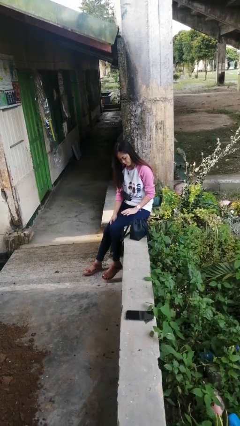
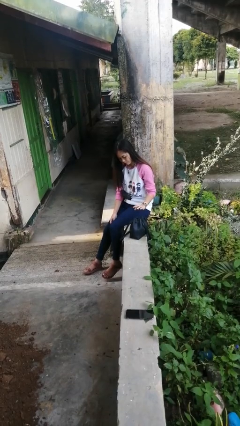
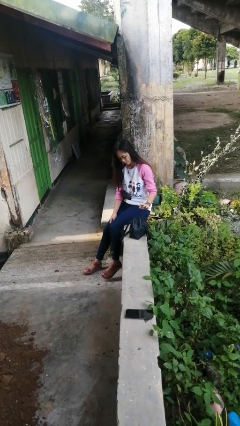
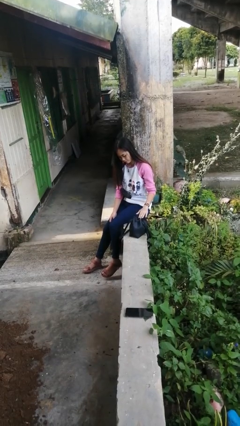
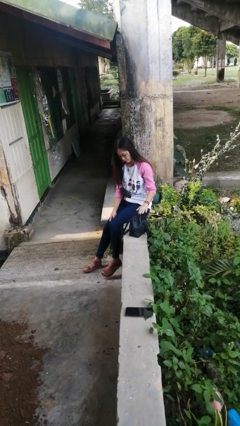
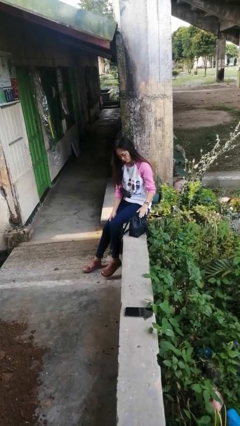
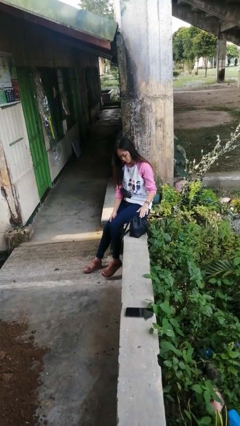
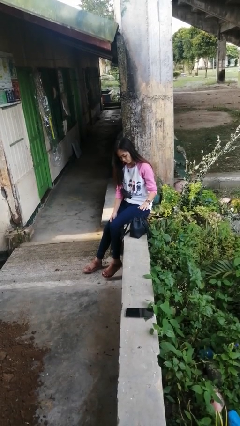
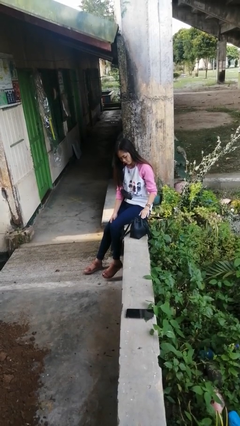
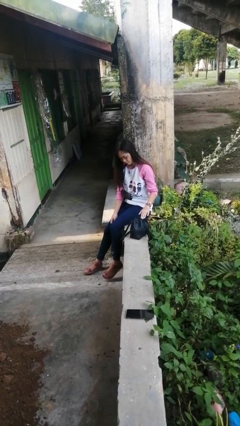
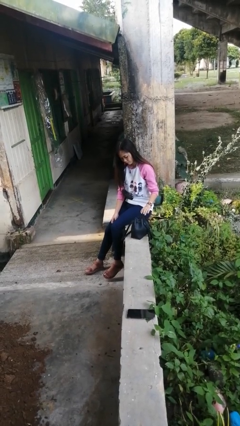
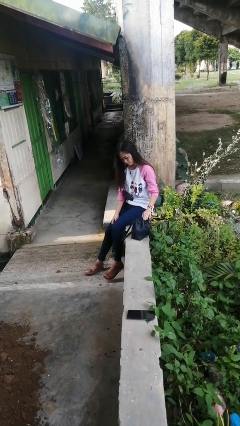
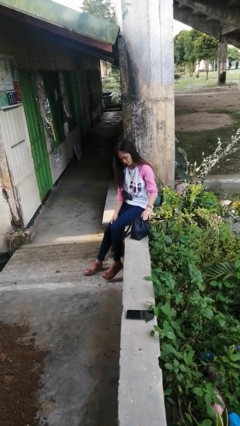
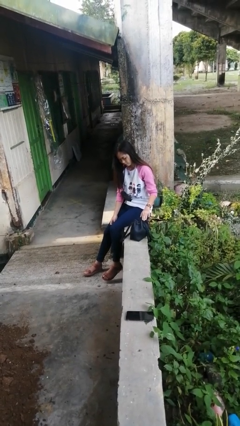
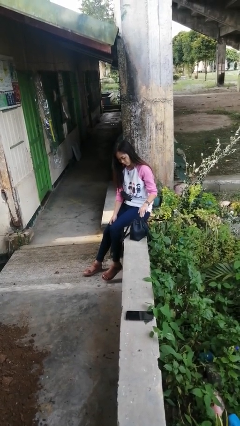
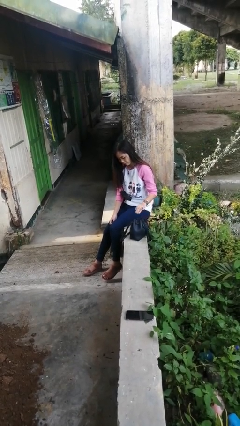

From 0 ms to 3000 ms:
person taps object with finger

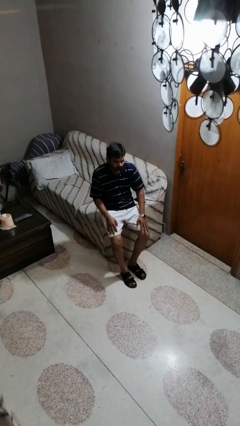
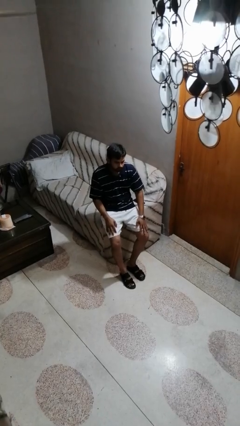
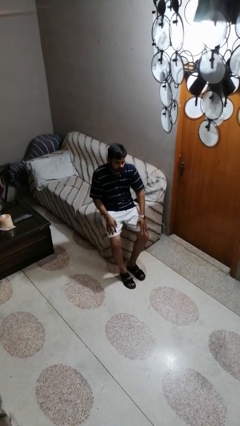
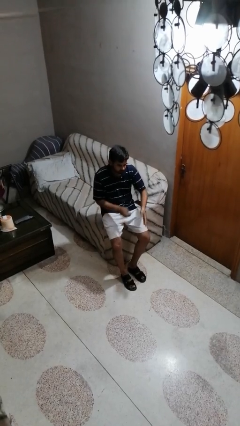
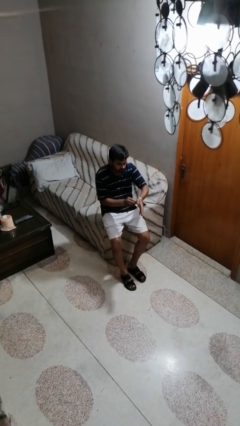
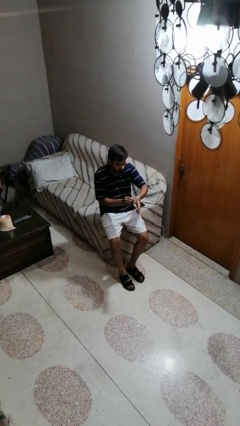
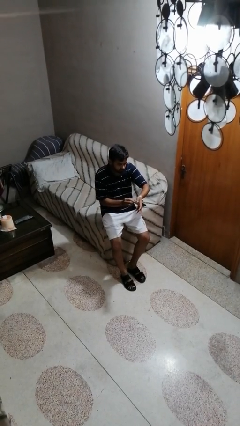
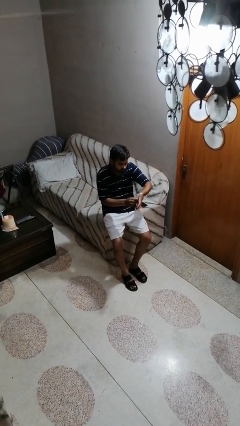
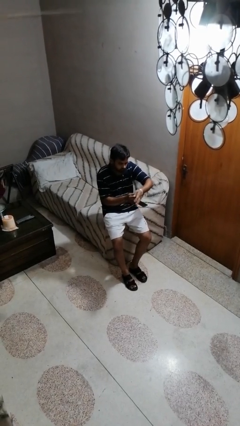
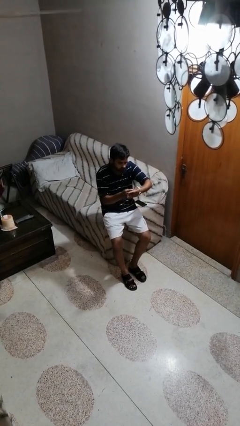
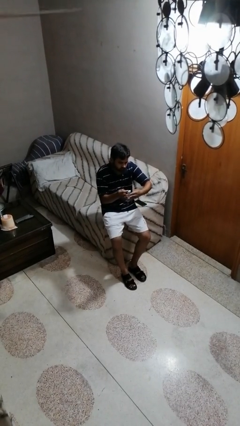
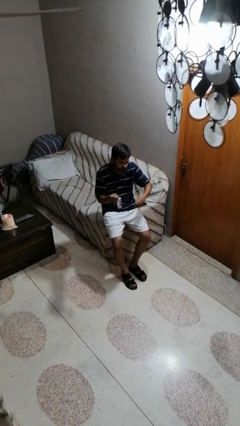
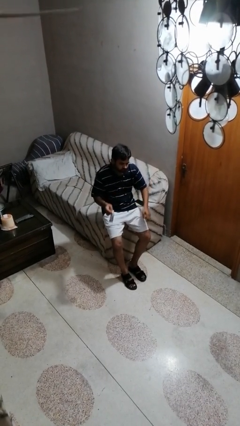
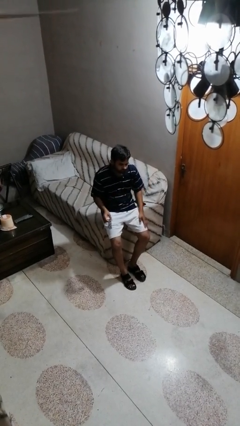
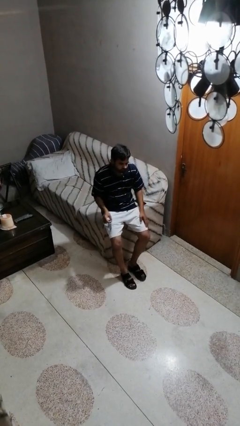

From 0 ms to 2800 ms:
person takes off wristwatch

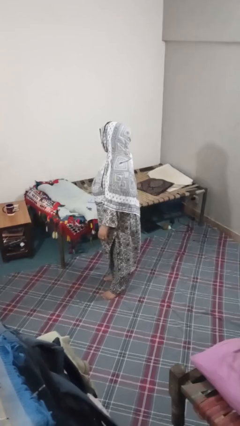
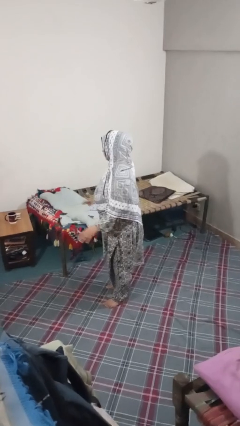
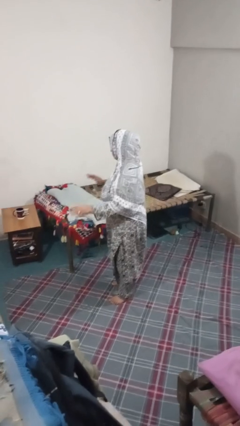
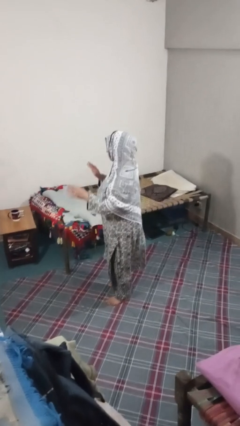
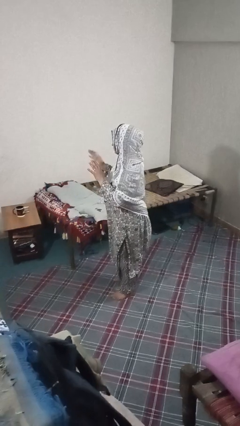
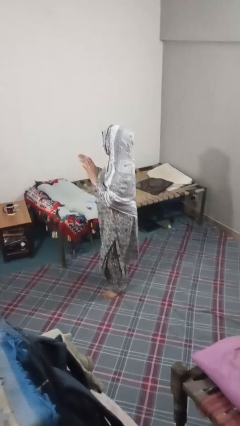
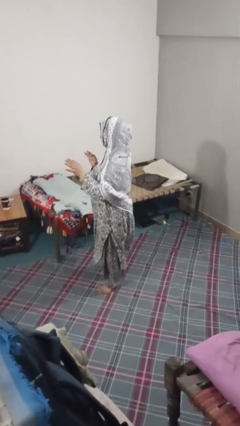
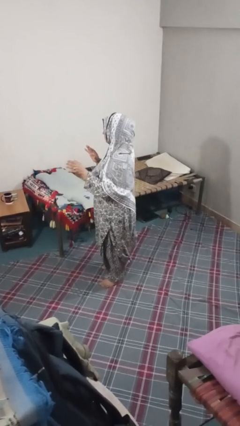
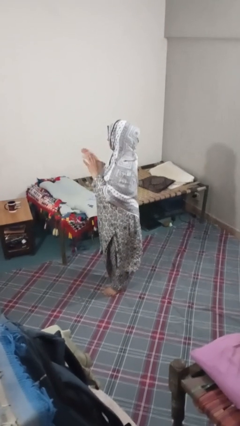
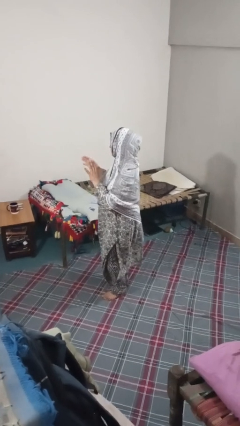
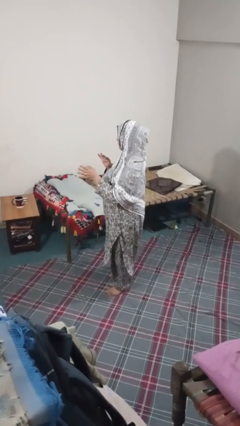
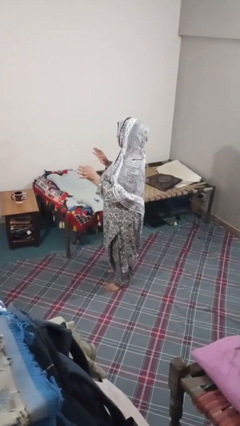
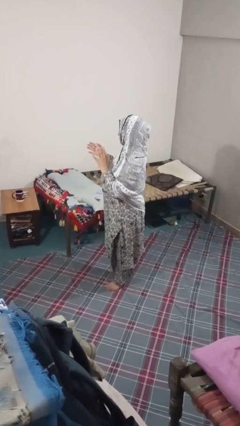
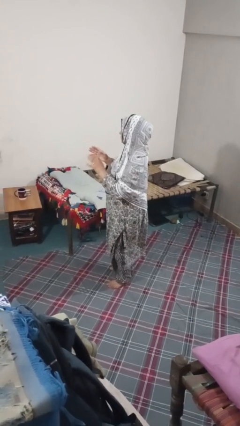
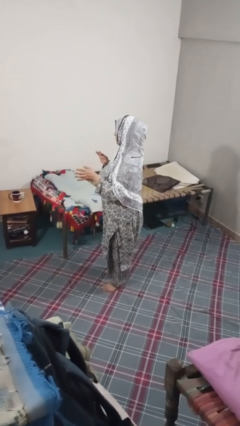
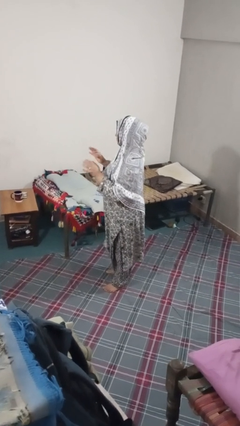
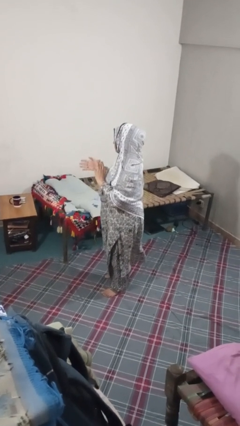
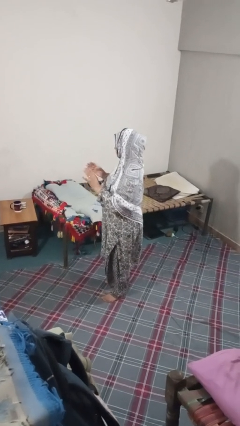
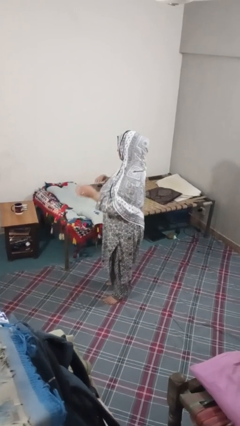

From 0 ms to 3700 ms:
person dances in place

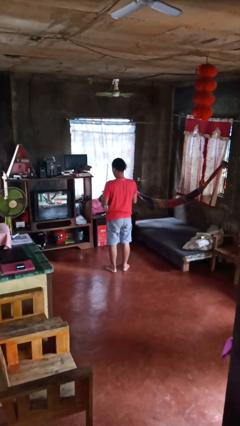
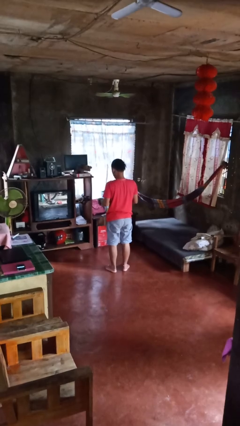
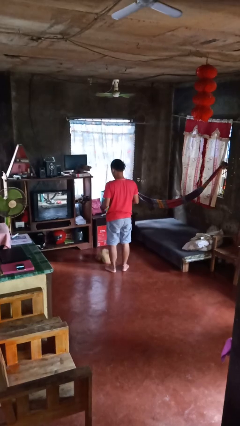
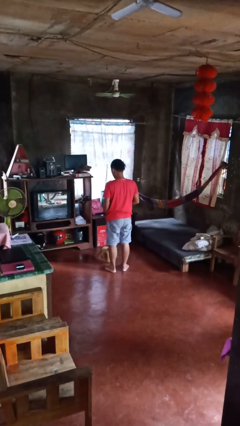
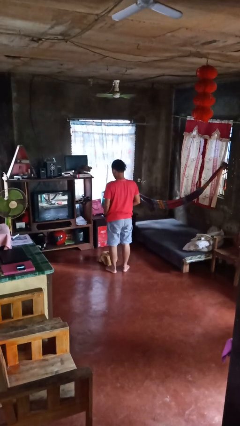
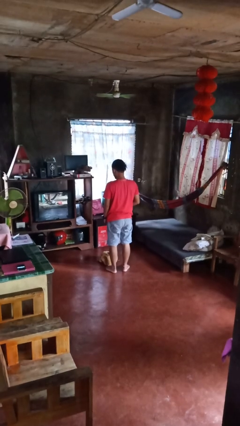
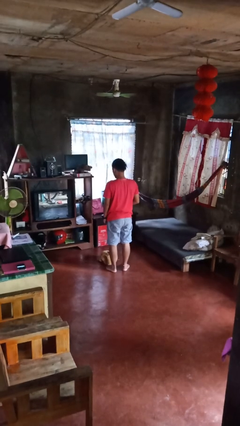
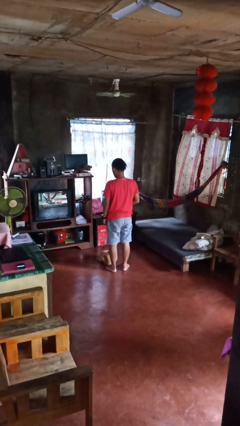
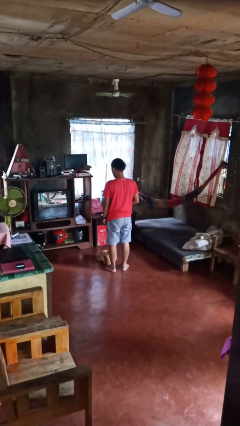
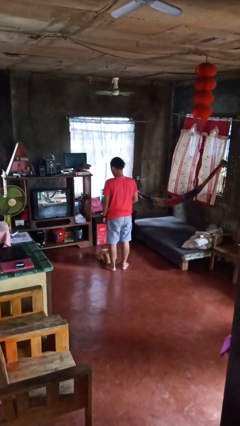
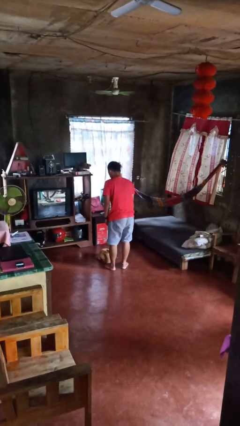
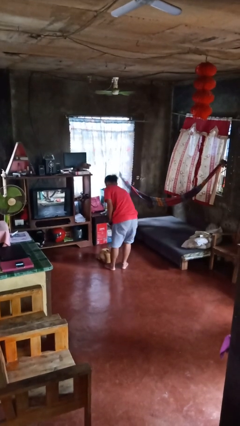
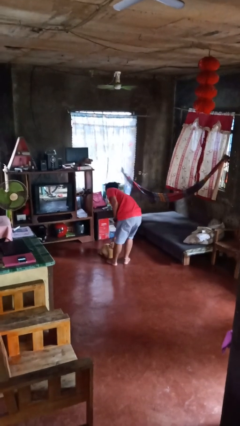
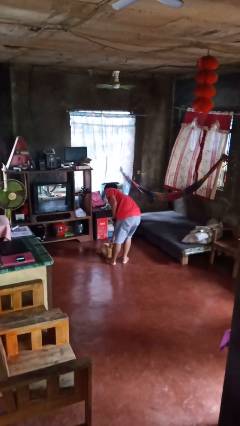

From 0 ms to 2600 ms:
person drops object

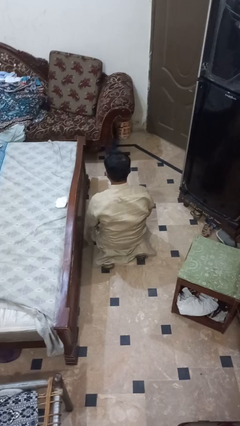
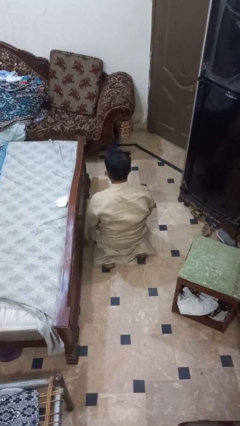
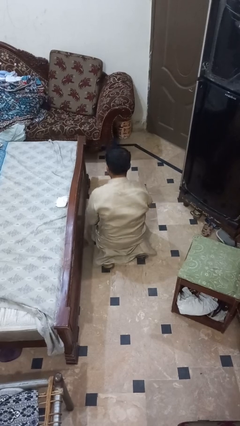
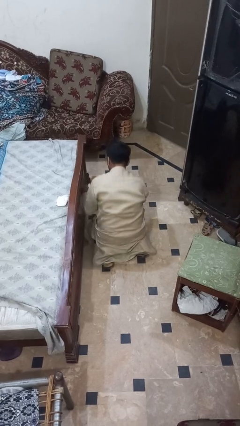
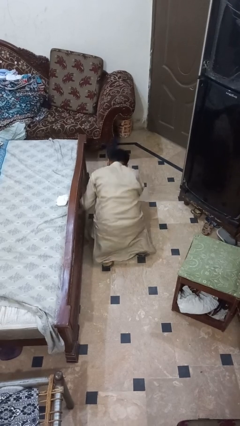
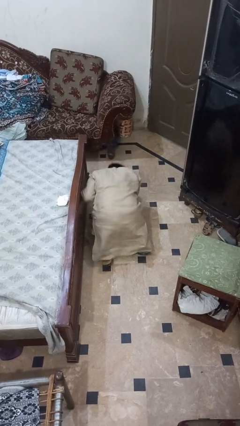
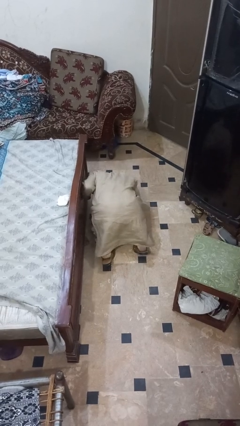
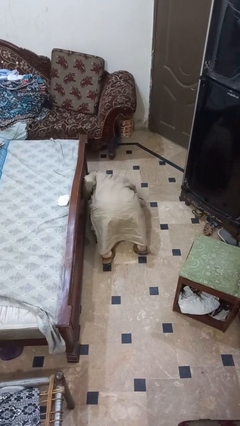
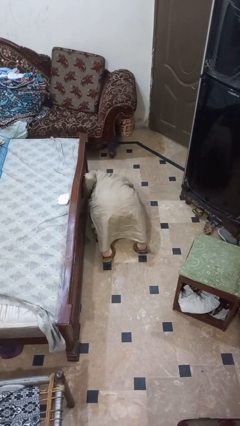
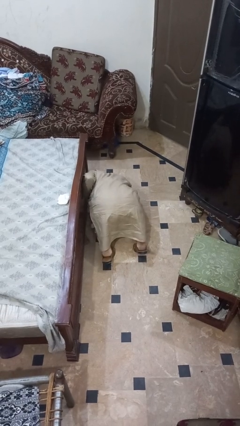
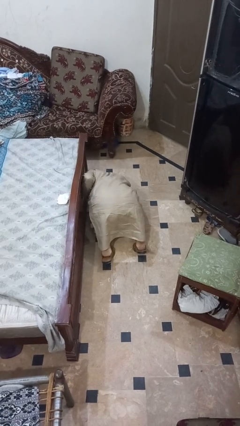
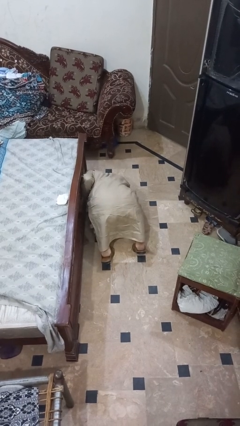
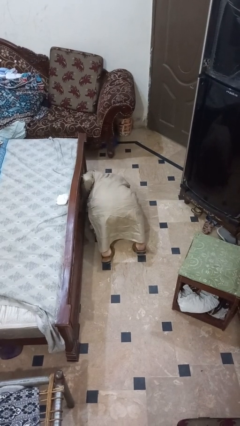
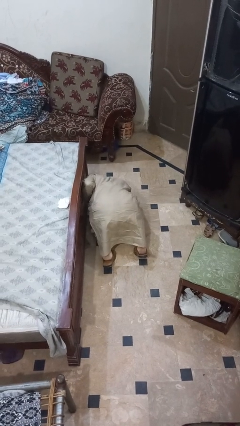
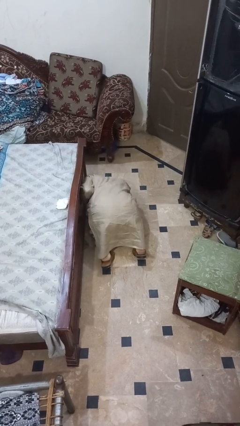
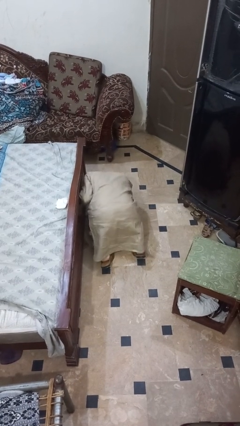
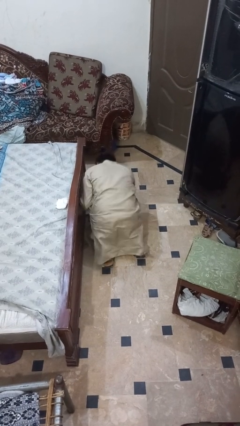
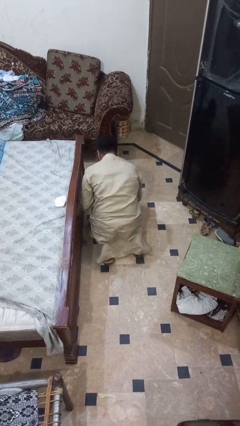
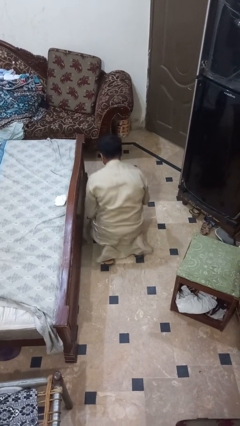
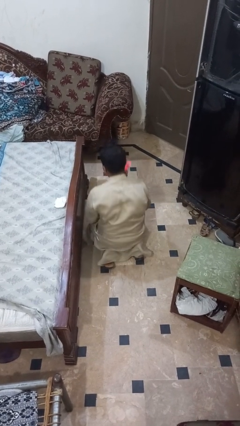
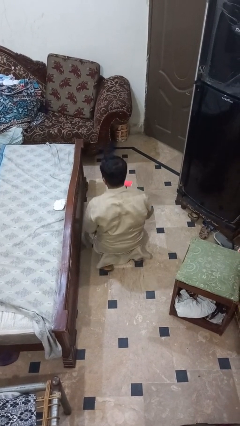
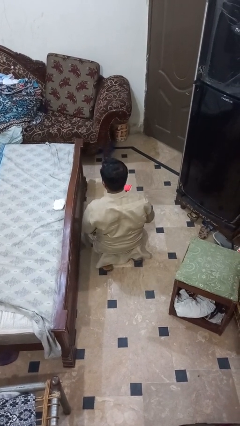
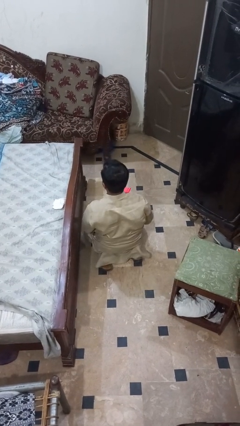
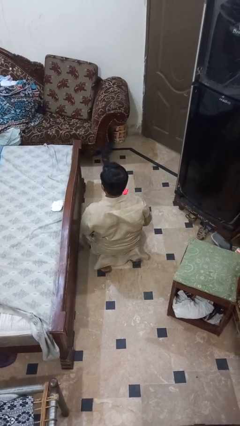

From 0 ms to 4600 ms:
person searches under bed

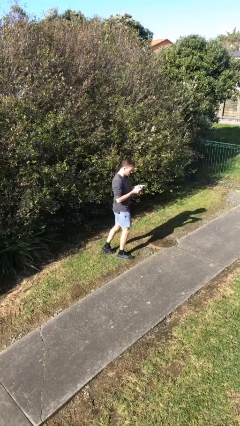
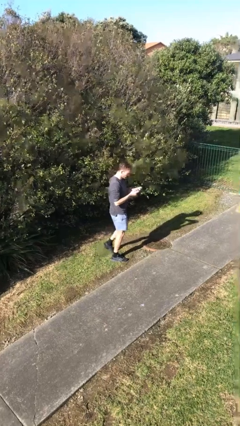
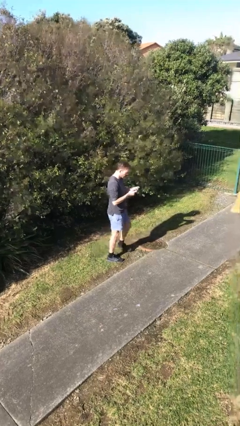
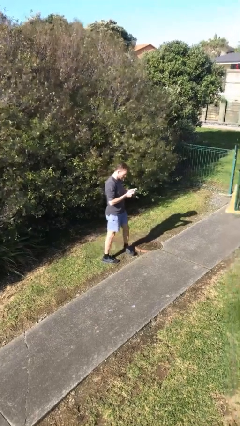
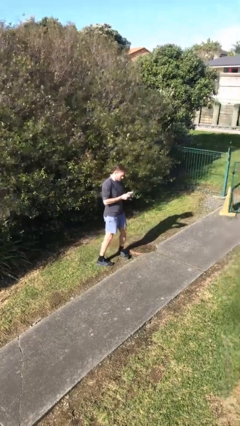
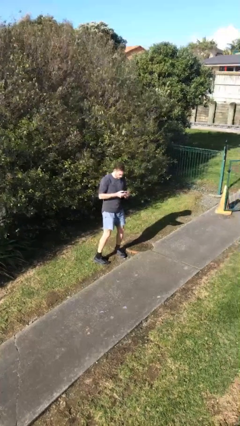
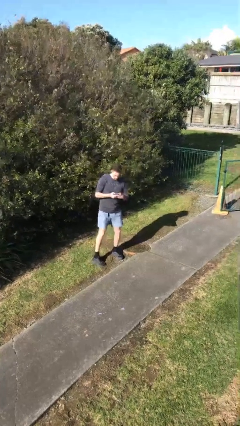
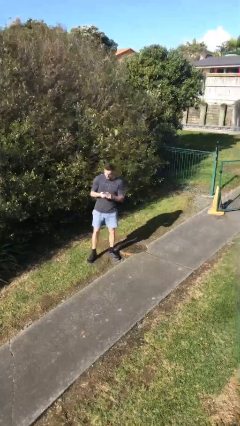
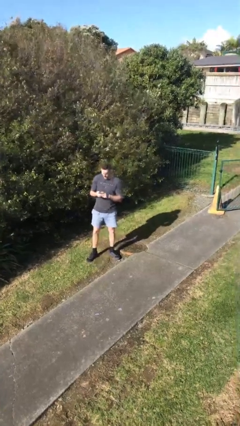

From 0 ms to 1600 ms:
person texts on phone
